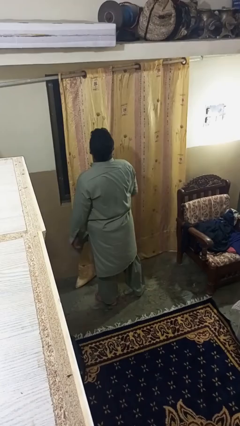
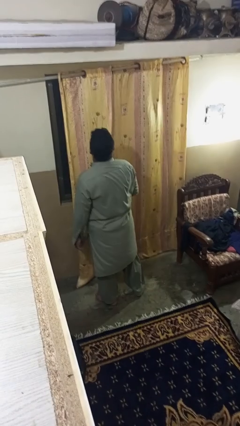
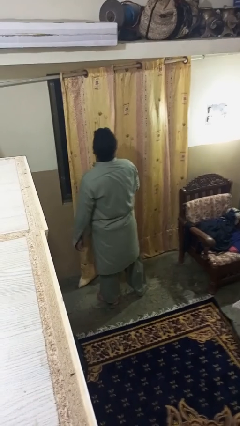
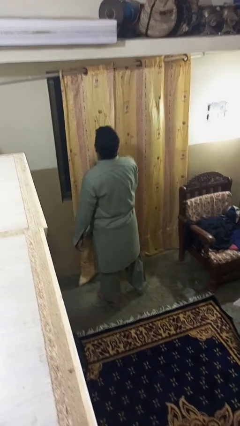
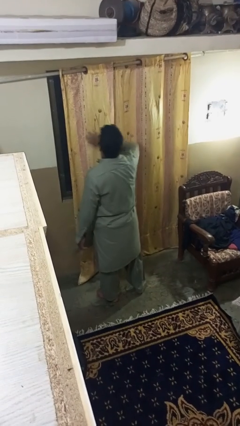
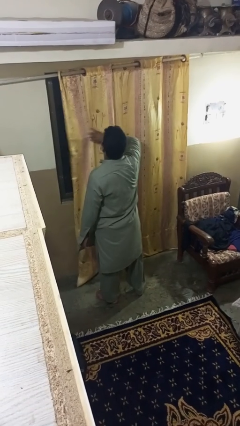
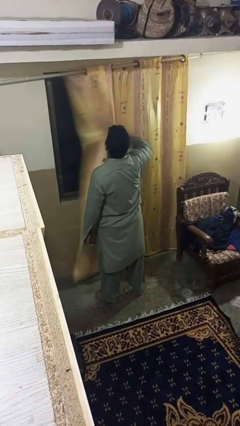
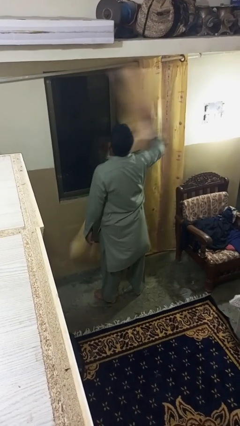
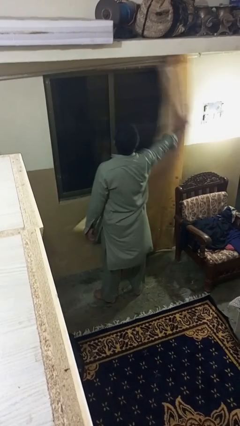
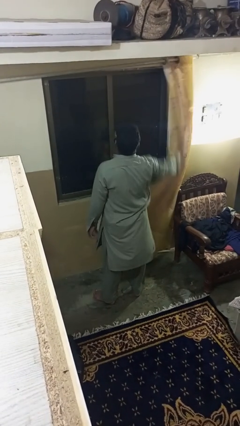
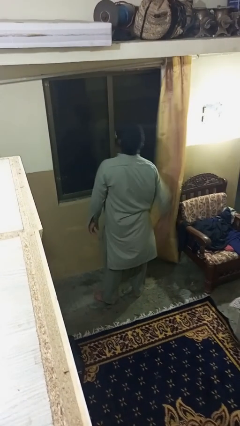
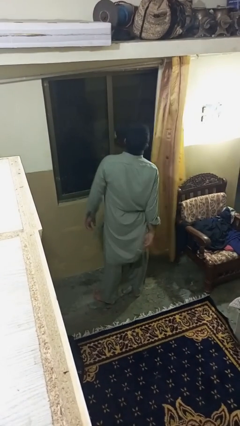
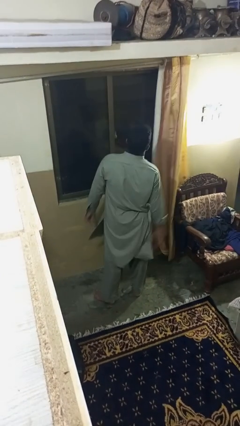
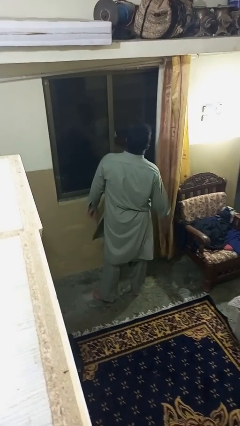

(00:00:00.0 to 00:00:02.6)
person opens curtains

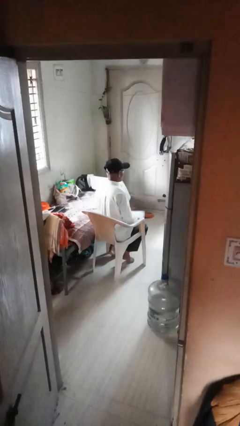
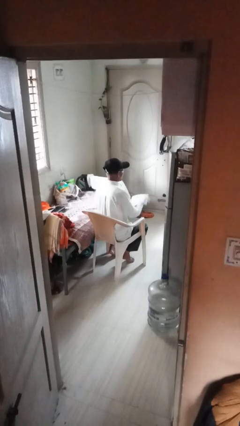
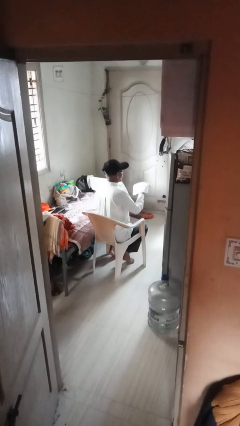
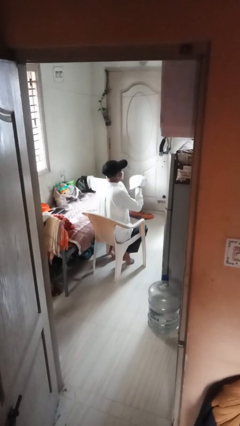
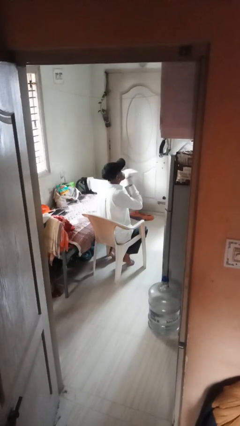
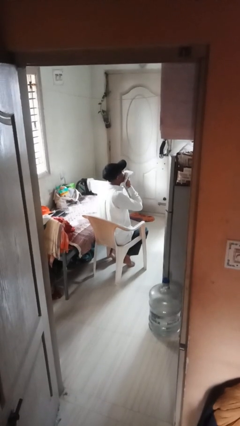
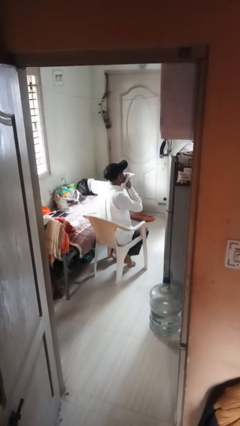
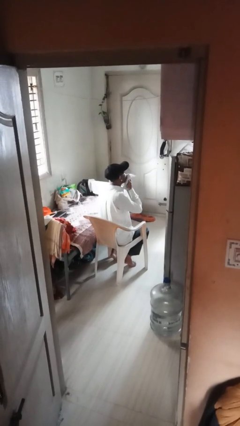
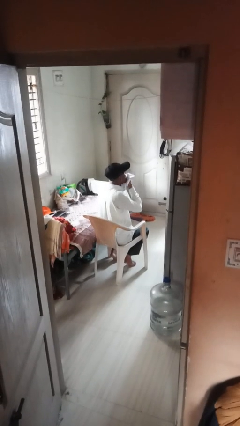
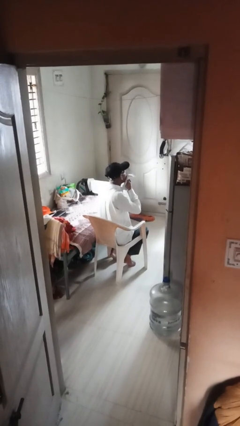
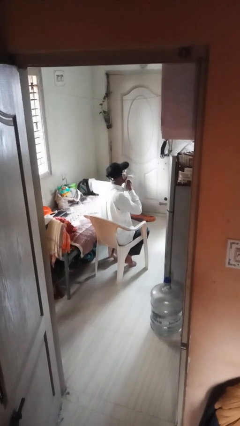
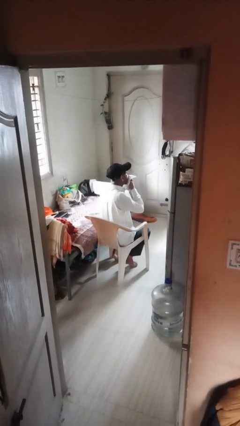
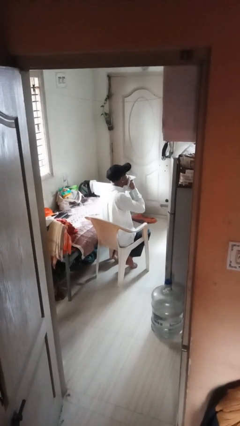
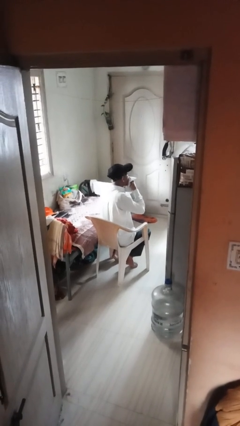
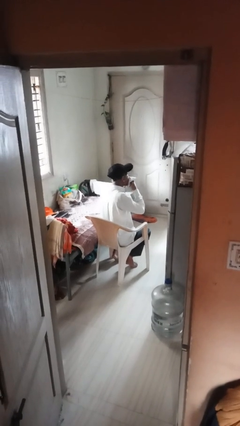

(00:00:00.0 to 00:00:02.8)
person wipes mouth with napkin

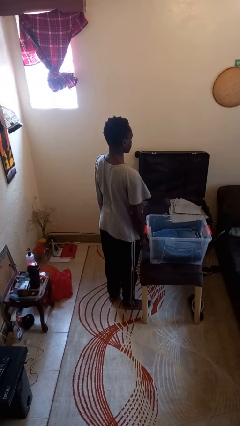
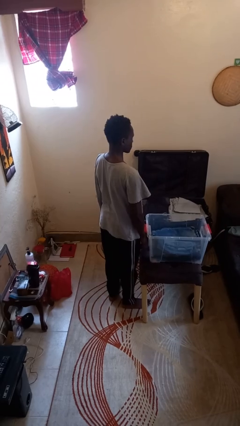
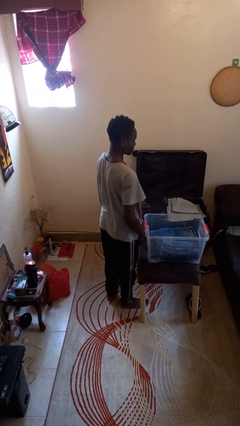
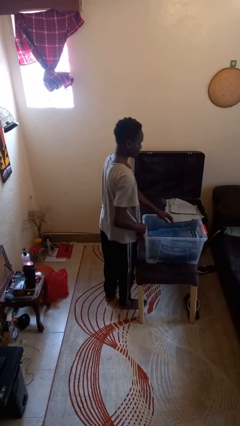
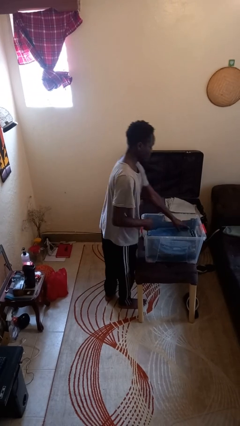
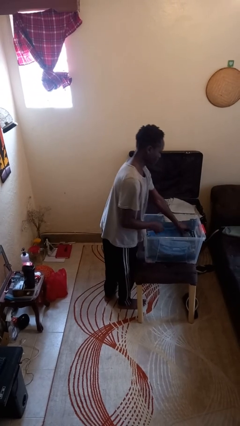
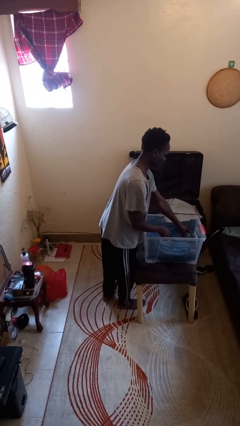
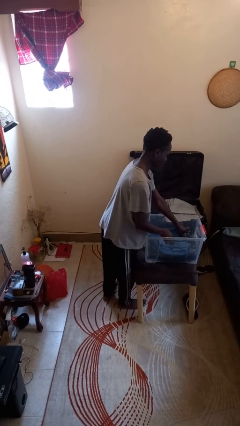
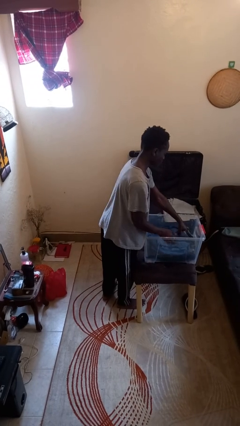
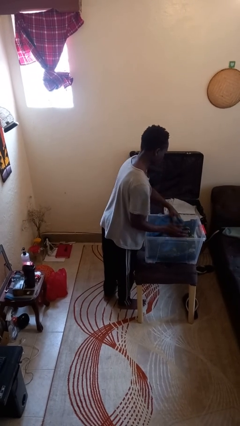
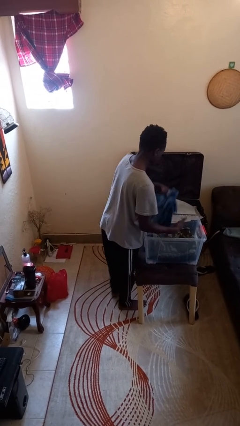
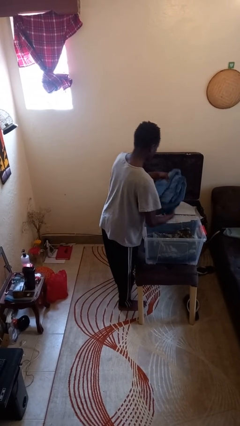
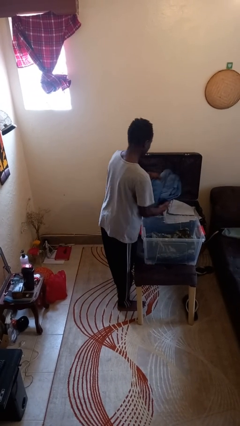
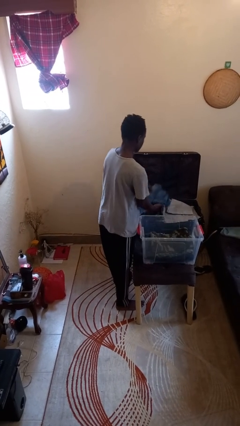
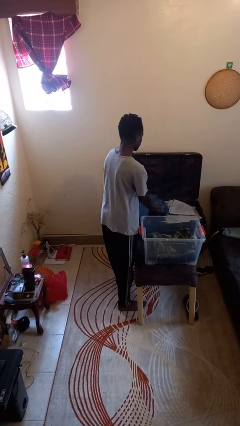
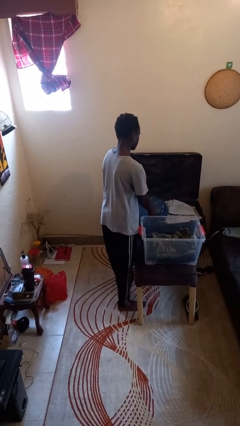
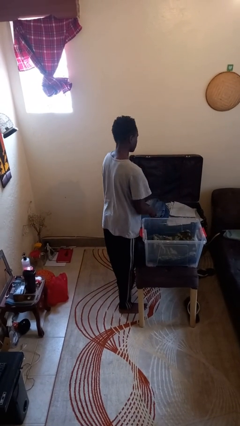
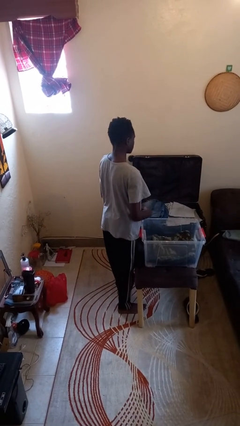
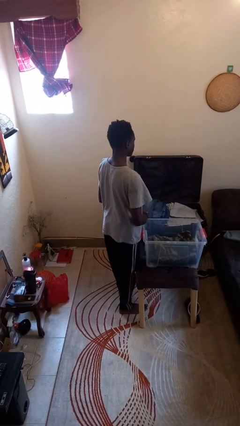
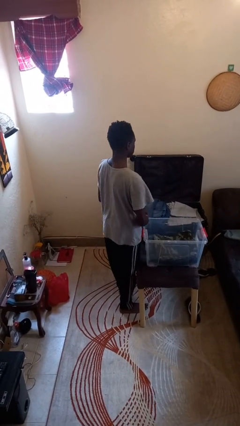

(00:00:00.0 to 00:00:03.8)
person loads clothes into suitcase

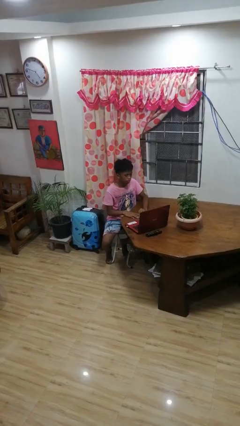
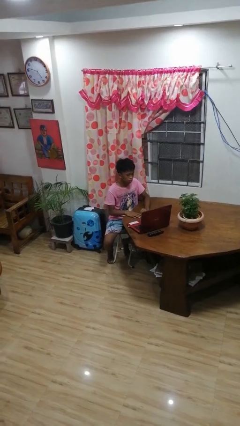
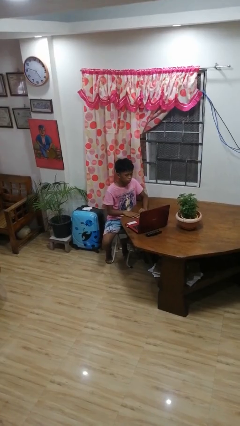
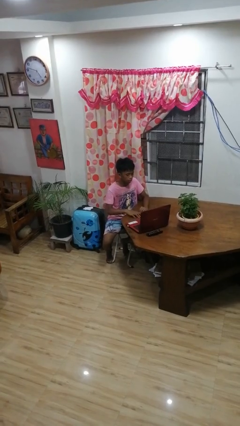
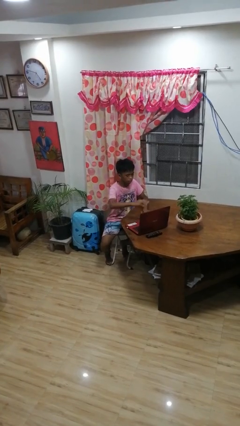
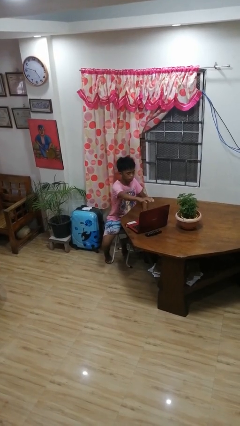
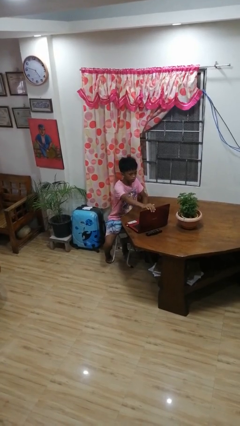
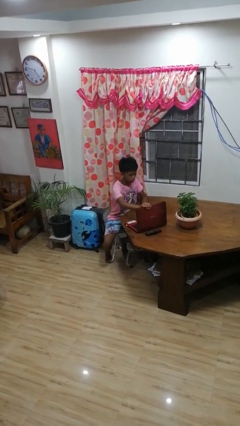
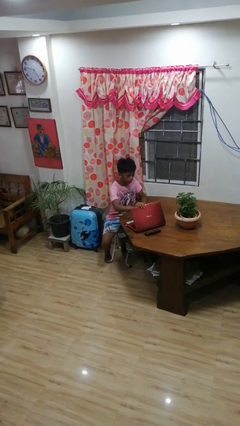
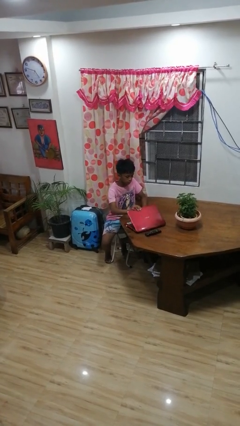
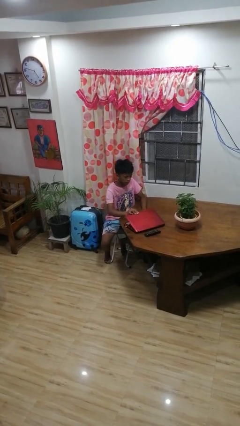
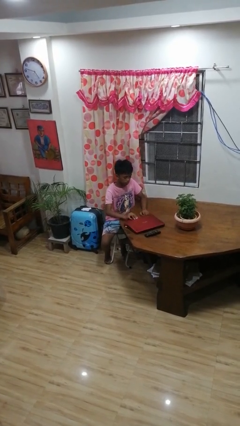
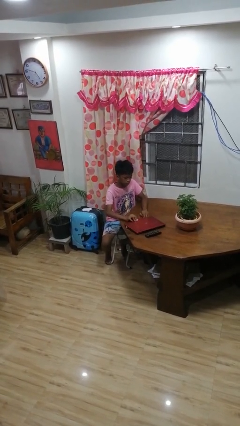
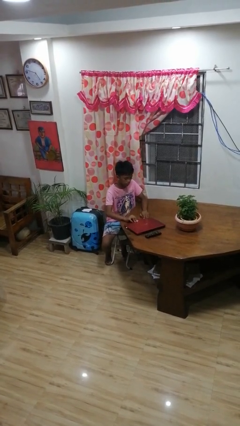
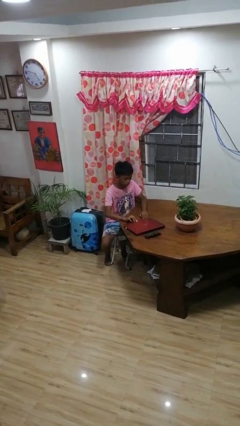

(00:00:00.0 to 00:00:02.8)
person closes laptop

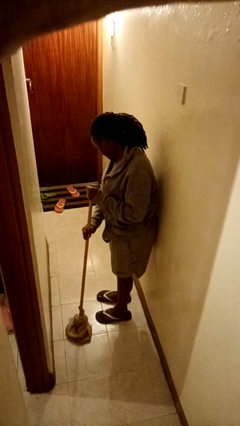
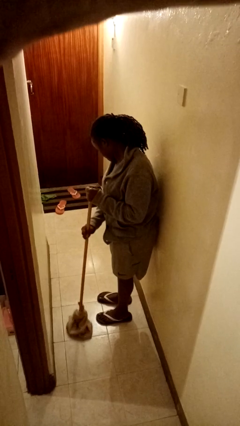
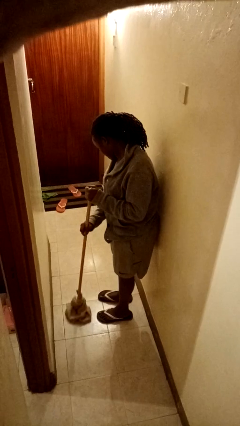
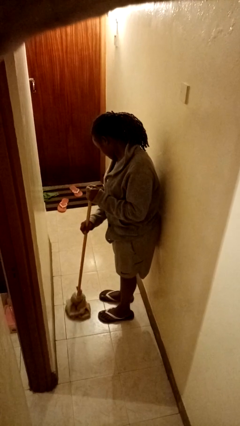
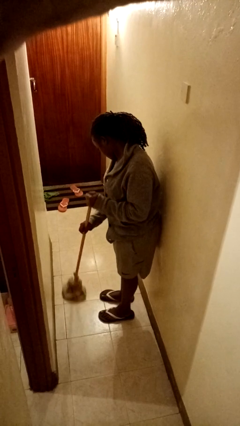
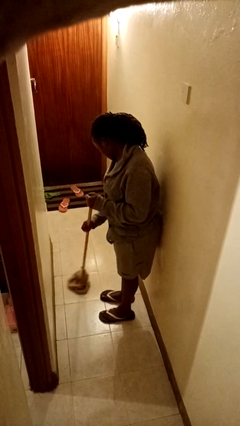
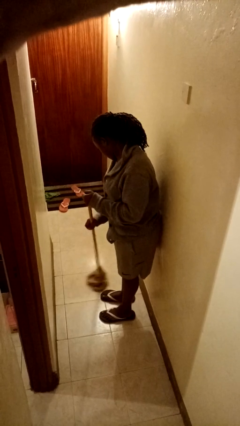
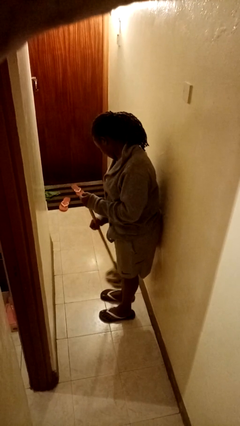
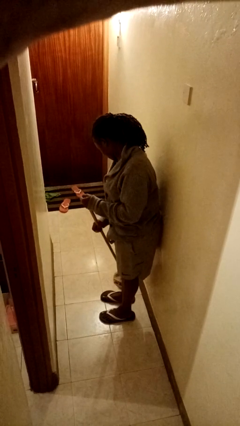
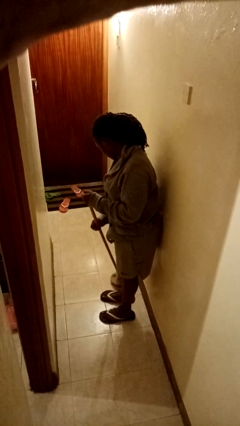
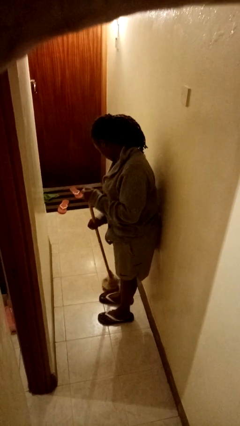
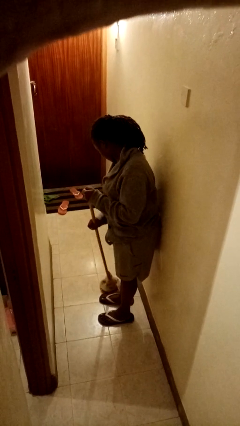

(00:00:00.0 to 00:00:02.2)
person mops

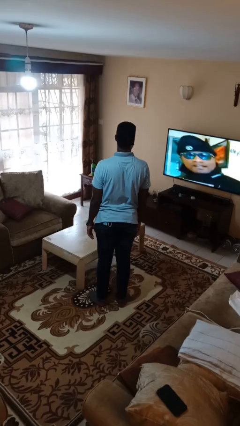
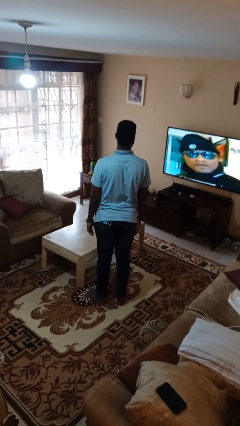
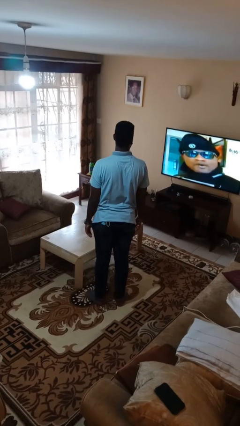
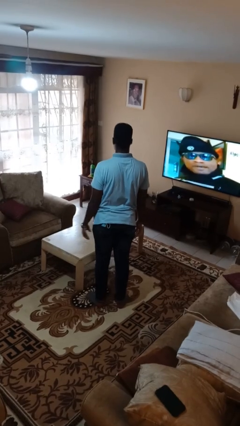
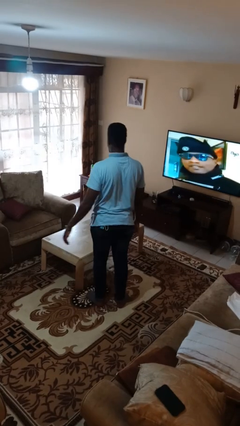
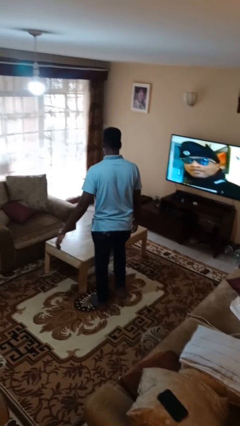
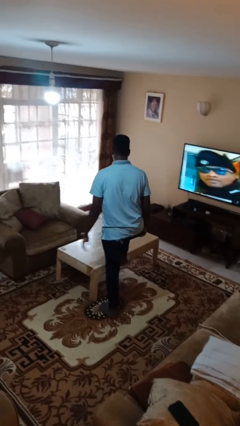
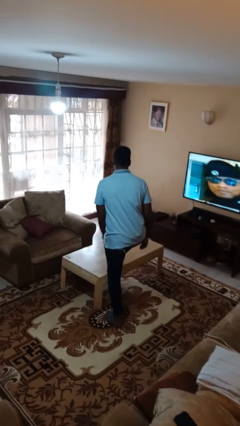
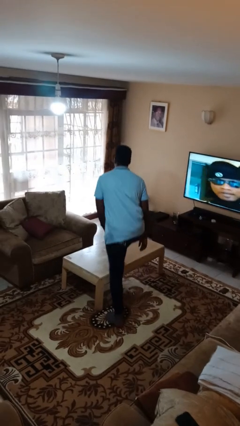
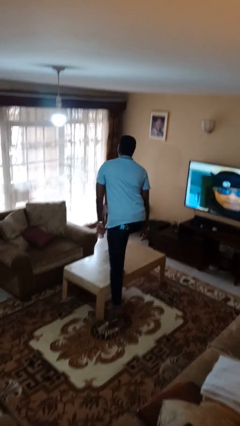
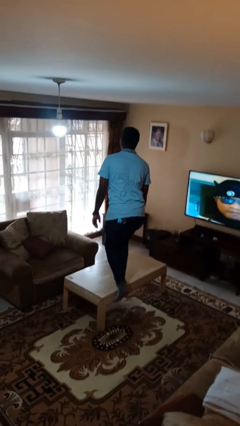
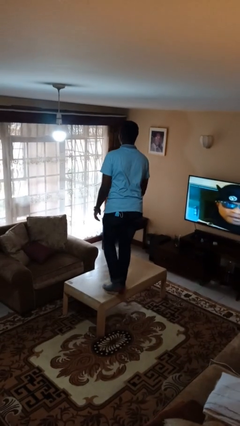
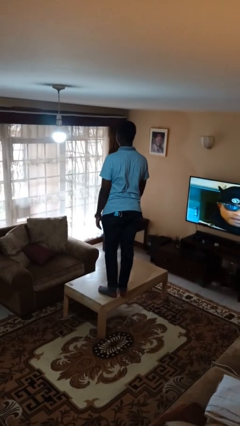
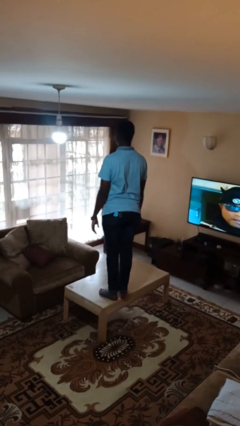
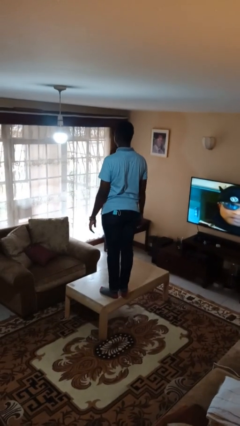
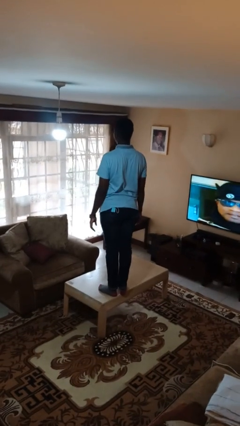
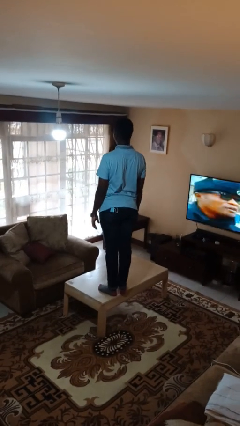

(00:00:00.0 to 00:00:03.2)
person climbs on table
